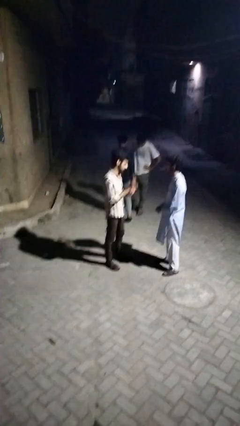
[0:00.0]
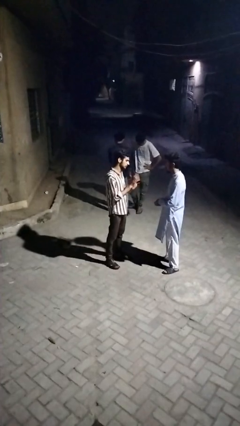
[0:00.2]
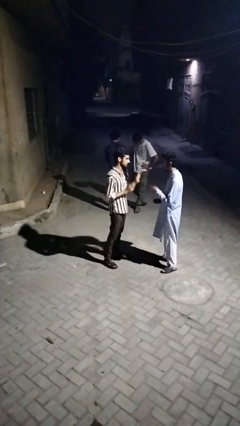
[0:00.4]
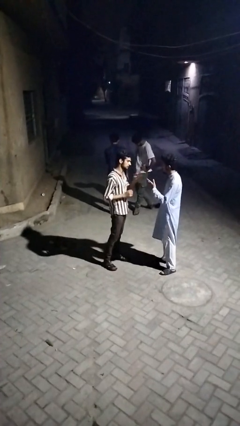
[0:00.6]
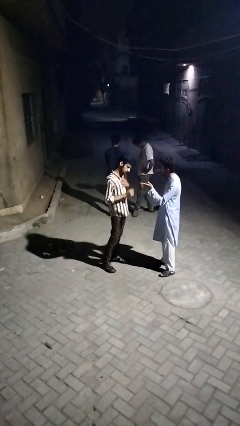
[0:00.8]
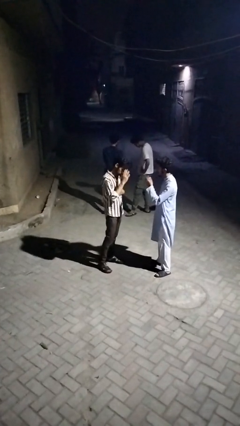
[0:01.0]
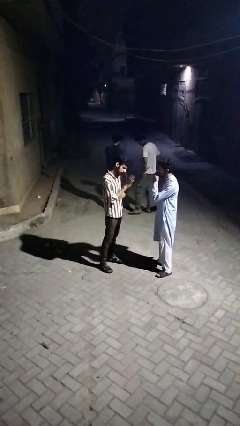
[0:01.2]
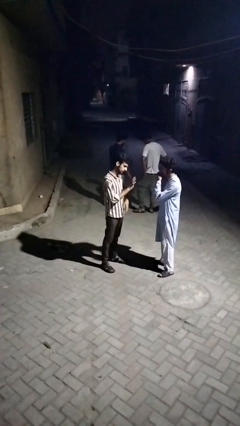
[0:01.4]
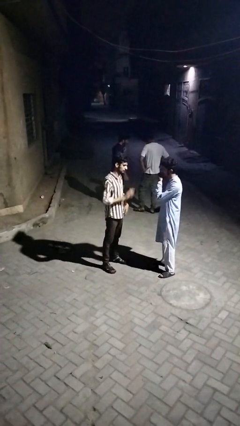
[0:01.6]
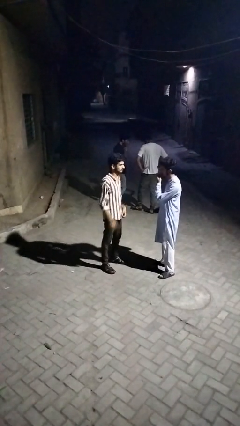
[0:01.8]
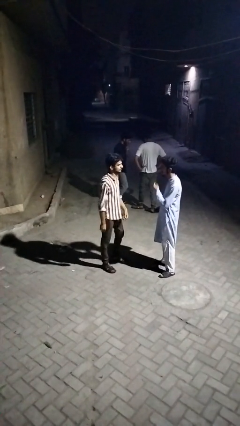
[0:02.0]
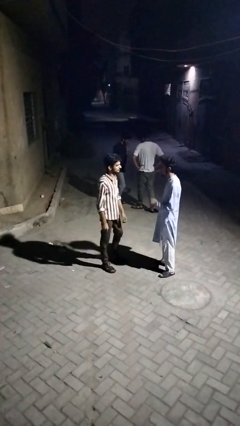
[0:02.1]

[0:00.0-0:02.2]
person talks to person

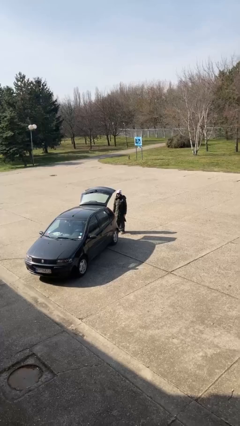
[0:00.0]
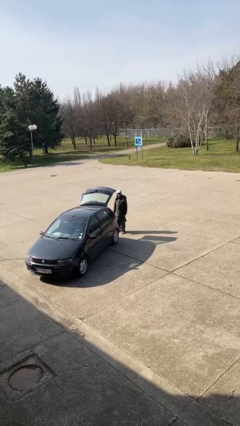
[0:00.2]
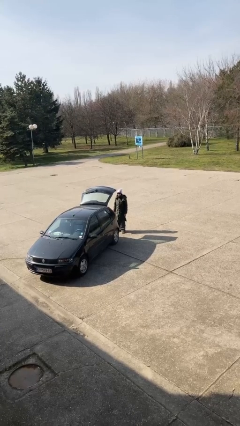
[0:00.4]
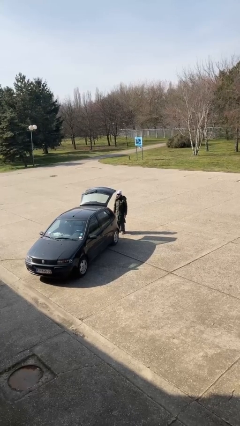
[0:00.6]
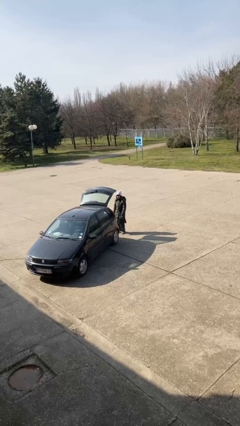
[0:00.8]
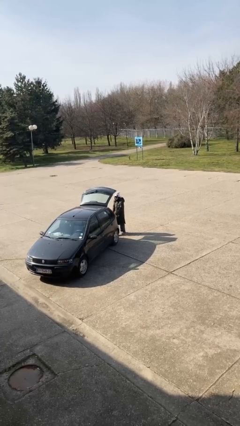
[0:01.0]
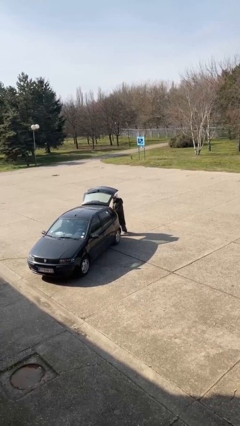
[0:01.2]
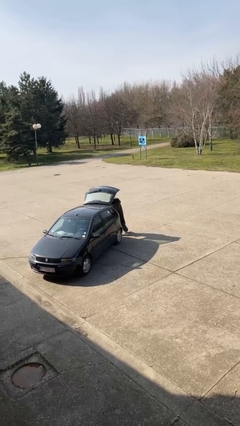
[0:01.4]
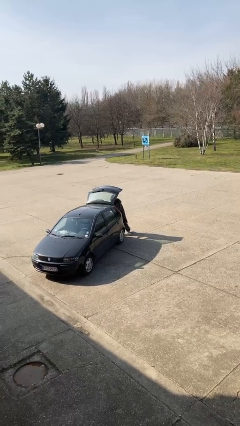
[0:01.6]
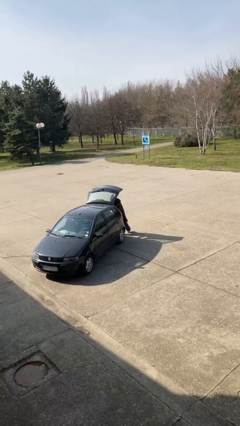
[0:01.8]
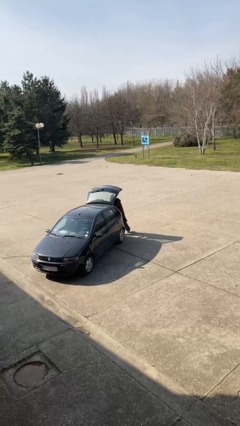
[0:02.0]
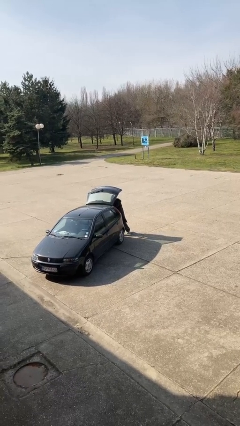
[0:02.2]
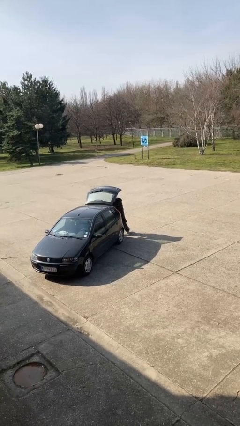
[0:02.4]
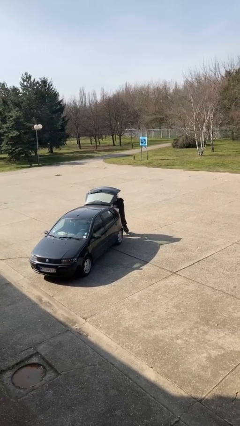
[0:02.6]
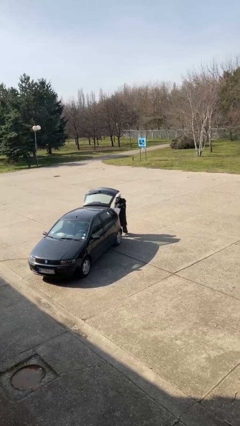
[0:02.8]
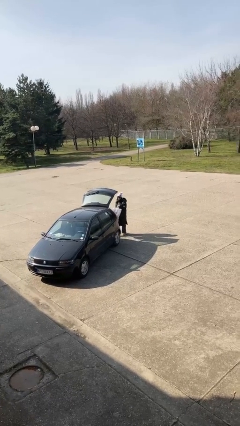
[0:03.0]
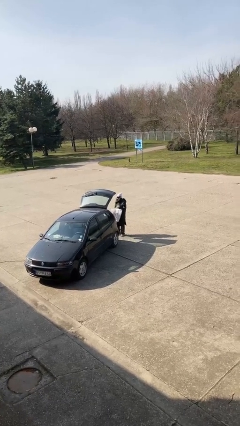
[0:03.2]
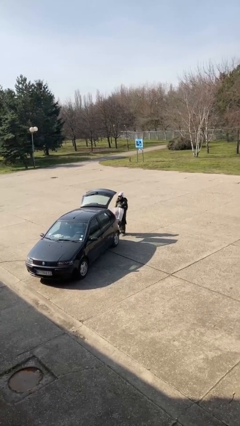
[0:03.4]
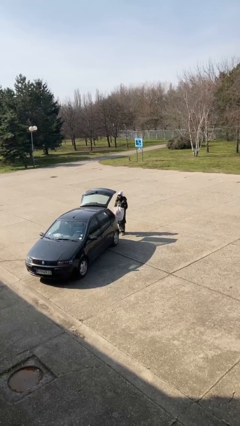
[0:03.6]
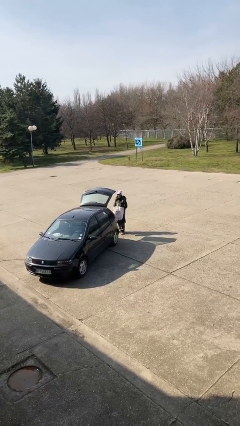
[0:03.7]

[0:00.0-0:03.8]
person unloads car

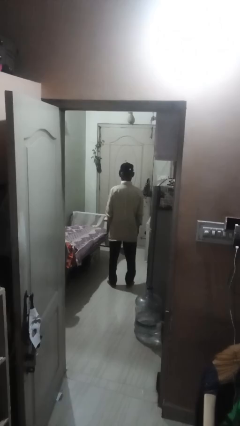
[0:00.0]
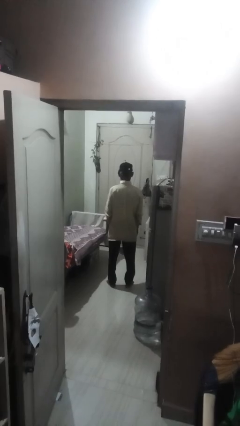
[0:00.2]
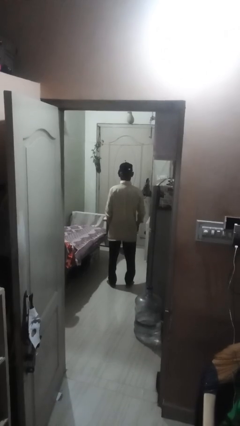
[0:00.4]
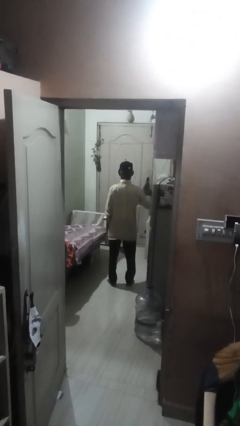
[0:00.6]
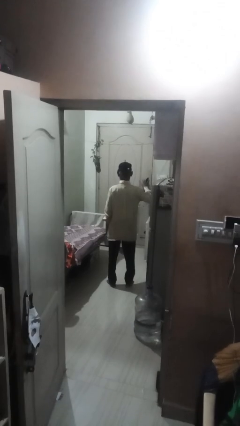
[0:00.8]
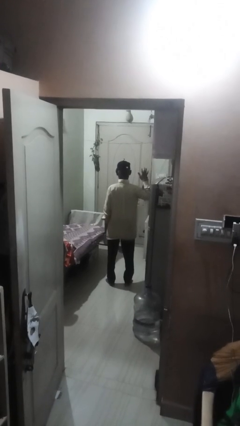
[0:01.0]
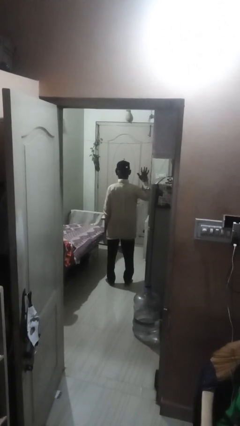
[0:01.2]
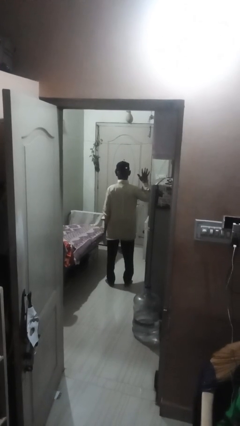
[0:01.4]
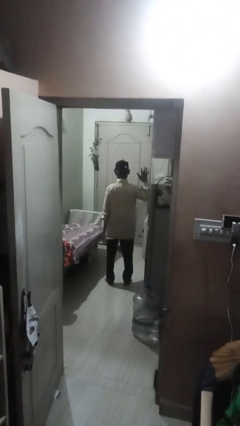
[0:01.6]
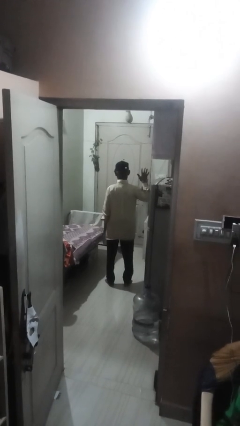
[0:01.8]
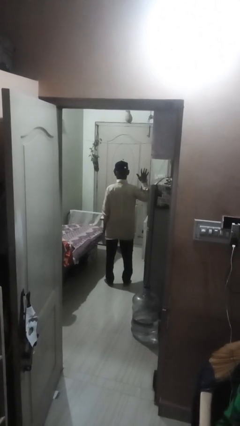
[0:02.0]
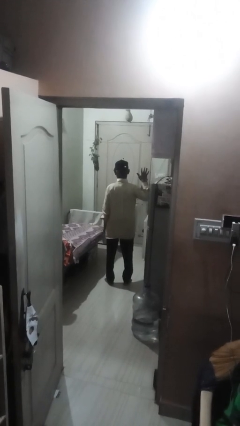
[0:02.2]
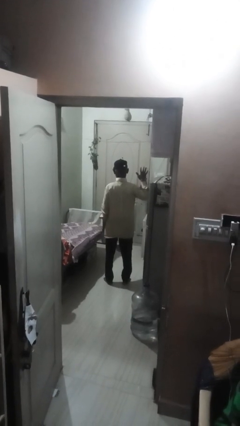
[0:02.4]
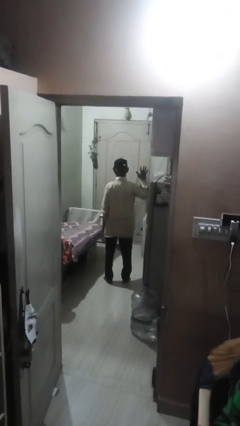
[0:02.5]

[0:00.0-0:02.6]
person gestures number five

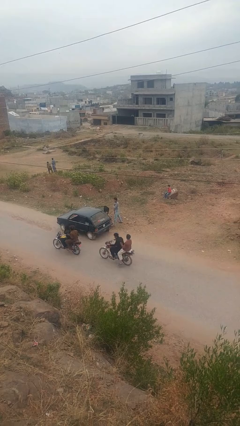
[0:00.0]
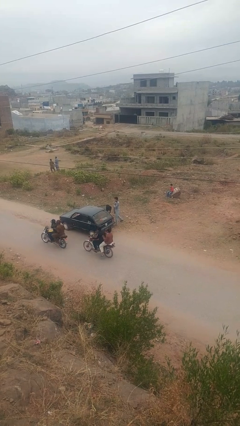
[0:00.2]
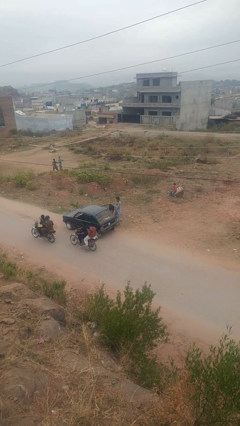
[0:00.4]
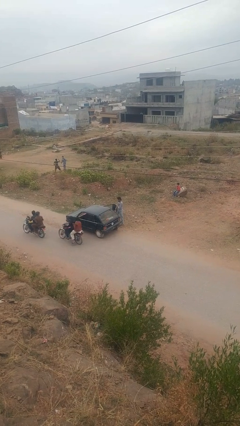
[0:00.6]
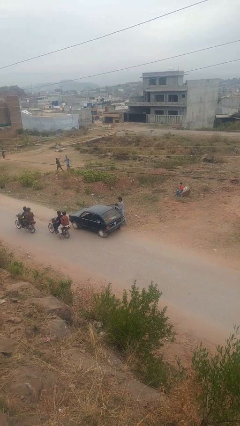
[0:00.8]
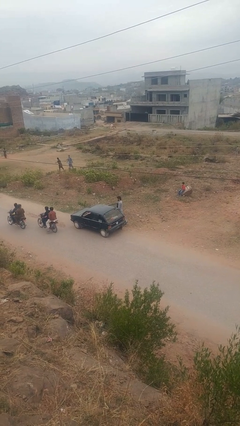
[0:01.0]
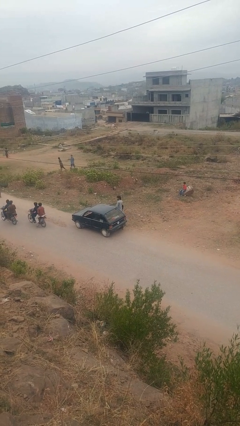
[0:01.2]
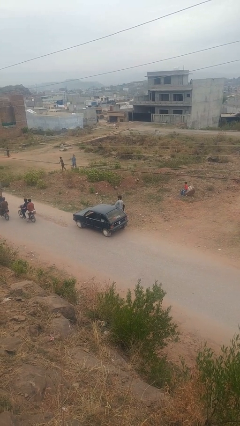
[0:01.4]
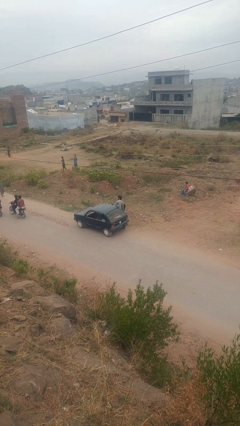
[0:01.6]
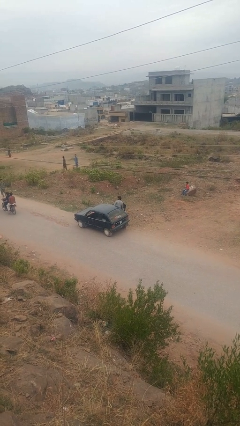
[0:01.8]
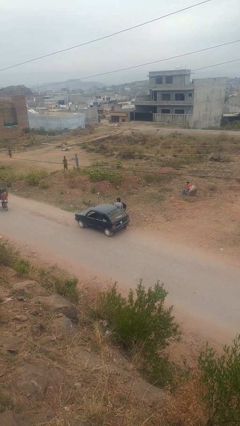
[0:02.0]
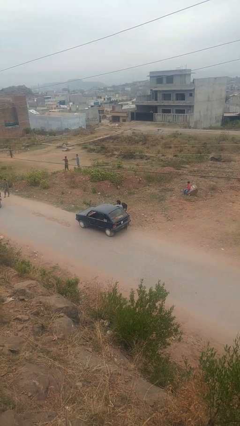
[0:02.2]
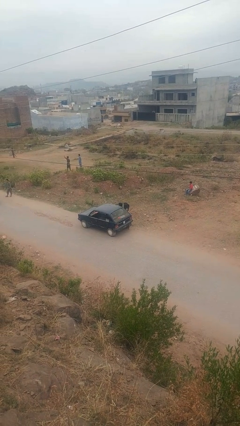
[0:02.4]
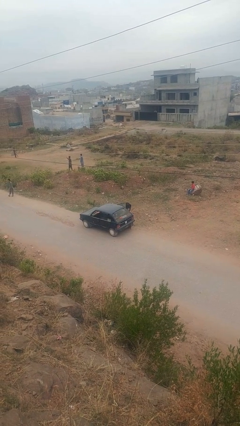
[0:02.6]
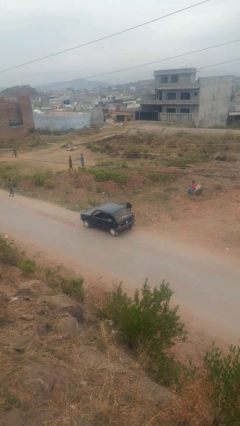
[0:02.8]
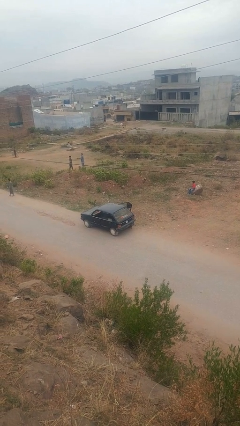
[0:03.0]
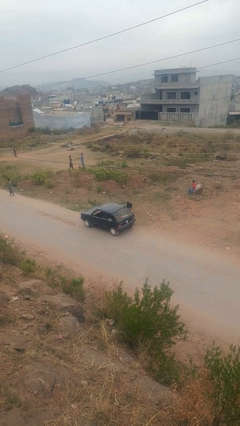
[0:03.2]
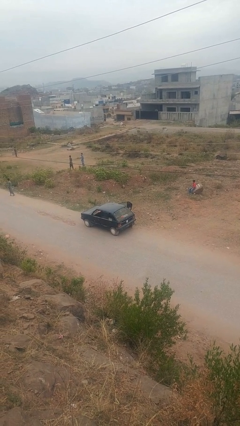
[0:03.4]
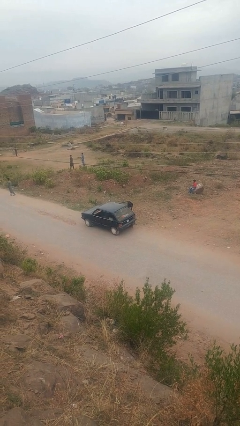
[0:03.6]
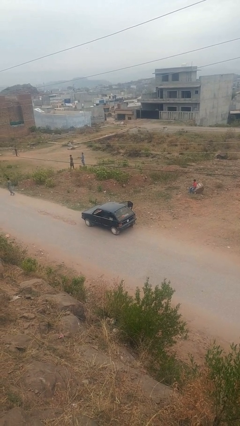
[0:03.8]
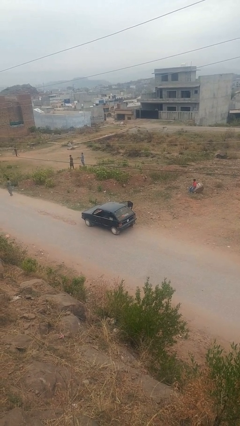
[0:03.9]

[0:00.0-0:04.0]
person enters car

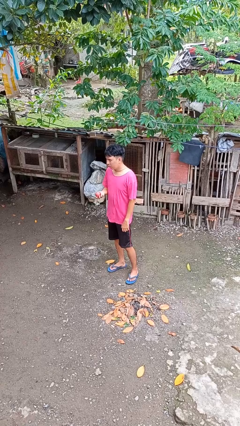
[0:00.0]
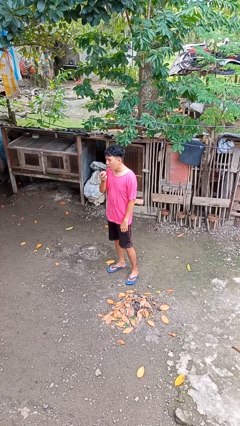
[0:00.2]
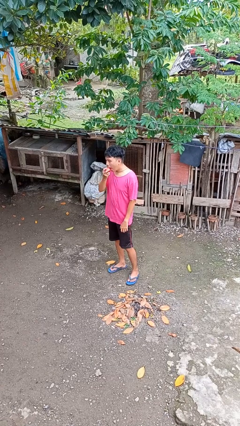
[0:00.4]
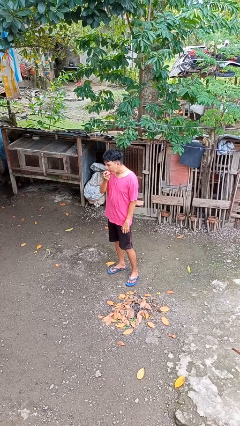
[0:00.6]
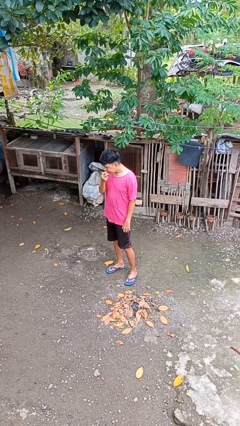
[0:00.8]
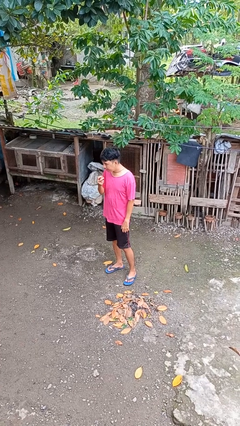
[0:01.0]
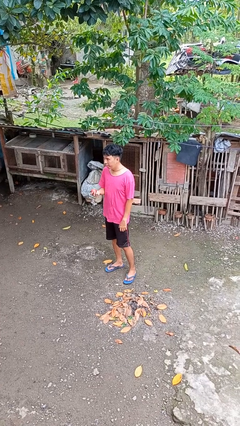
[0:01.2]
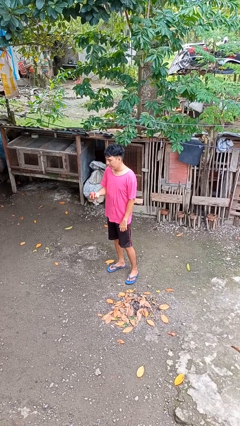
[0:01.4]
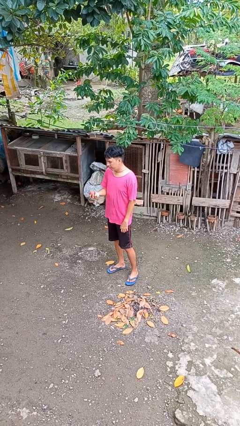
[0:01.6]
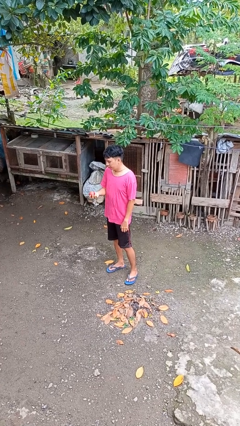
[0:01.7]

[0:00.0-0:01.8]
person eats apple

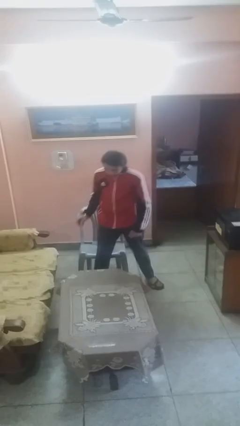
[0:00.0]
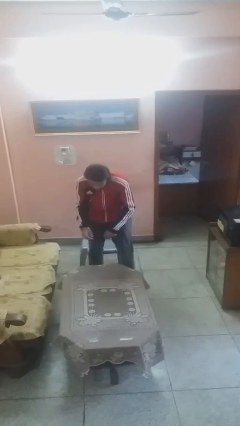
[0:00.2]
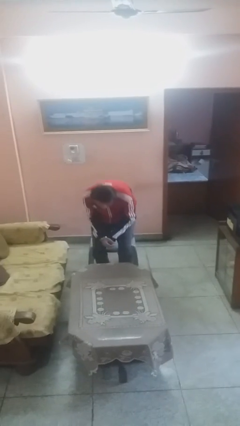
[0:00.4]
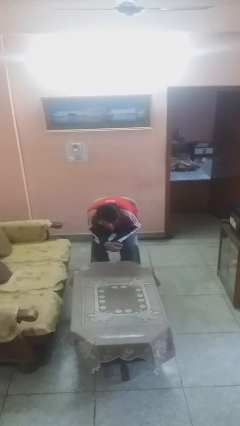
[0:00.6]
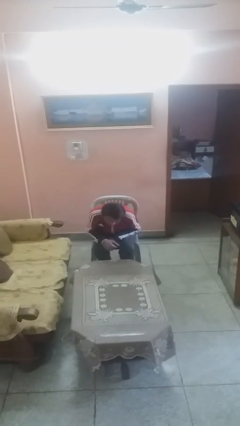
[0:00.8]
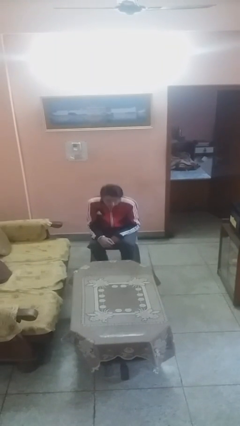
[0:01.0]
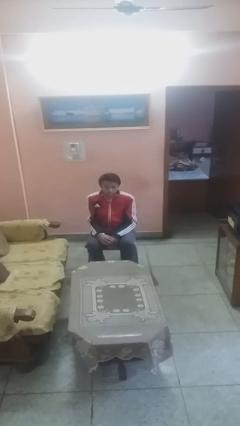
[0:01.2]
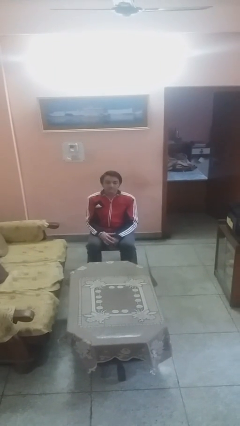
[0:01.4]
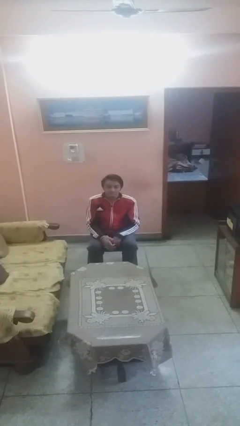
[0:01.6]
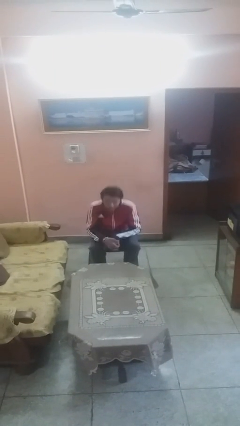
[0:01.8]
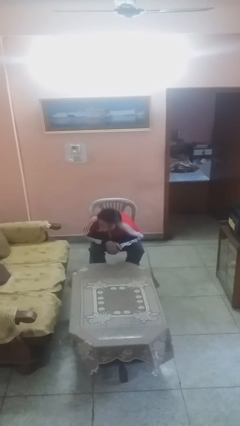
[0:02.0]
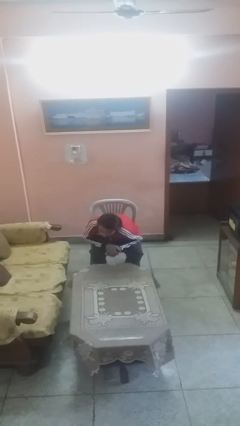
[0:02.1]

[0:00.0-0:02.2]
person sits down

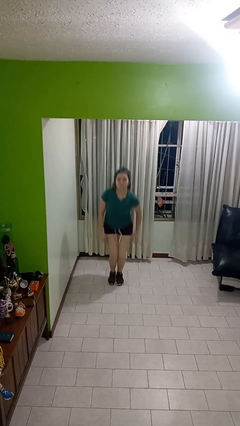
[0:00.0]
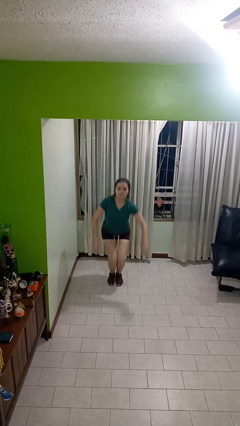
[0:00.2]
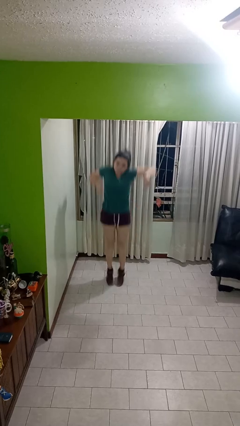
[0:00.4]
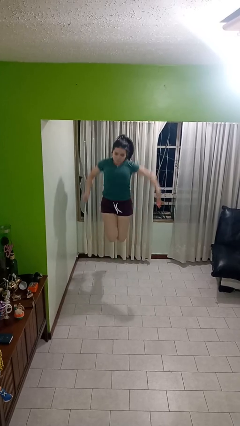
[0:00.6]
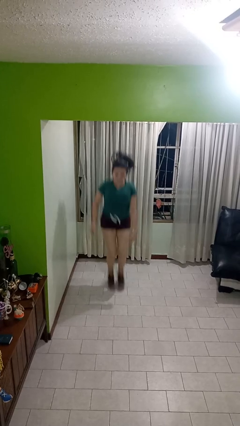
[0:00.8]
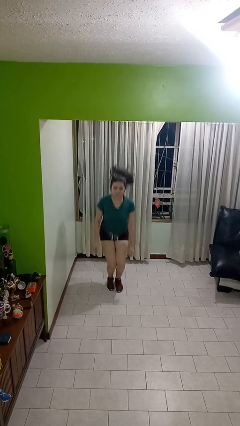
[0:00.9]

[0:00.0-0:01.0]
person jumps
